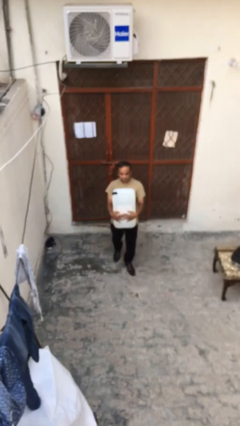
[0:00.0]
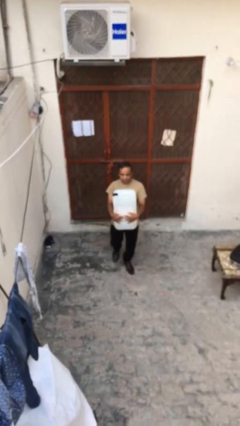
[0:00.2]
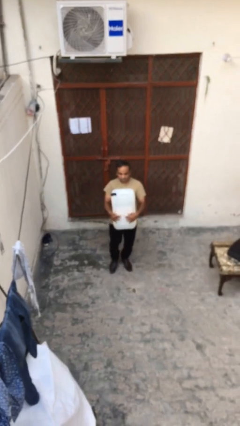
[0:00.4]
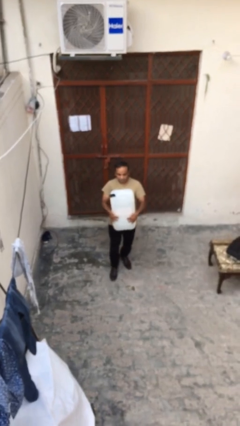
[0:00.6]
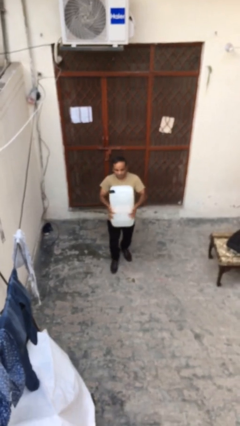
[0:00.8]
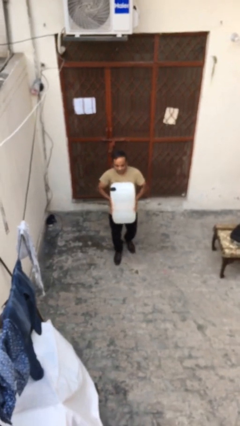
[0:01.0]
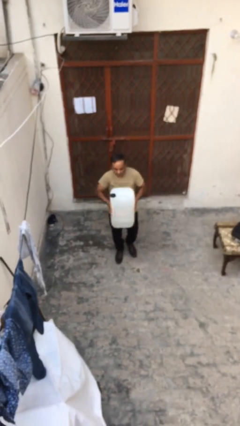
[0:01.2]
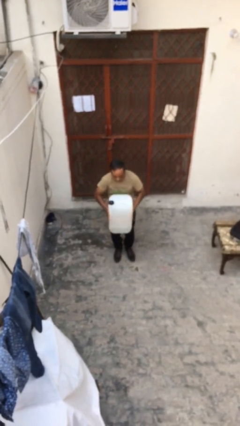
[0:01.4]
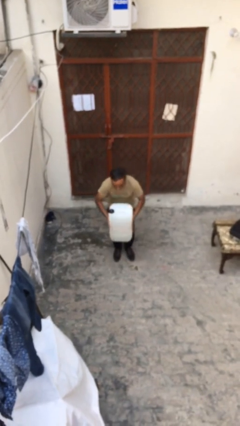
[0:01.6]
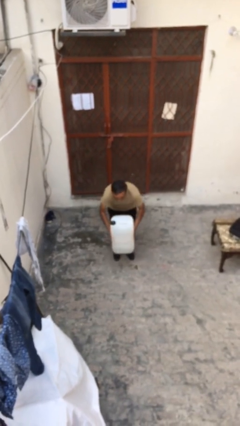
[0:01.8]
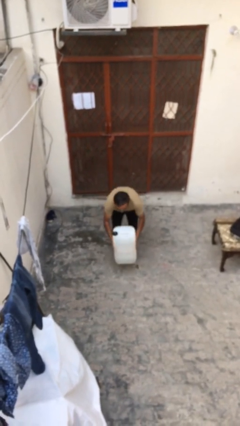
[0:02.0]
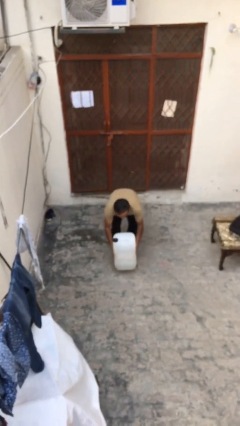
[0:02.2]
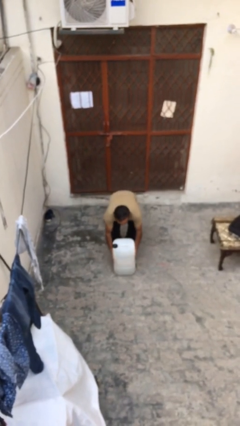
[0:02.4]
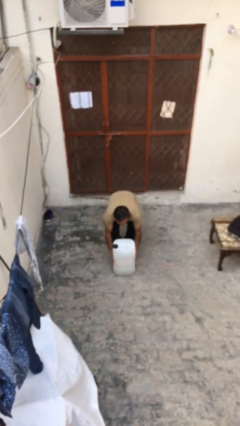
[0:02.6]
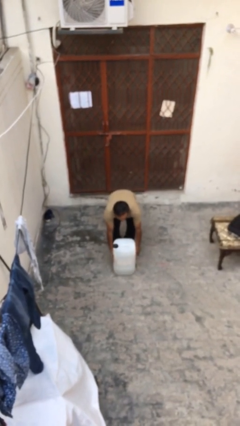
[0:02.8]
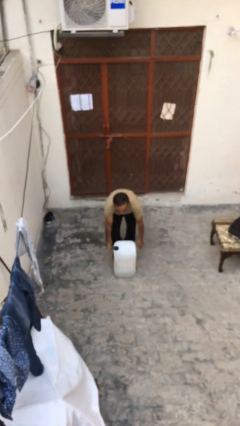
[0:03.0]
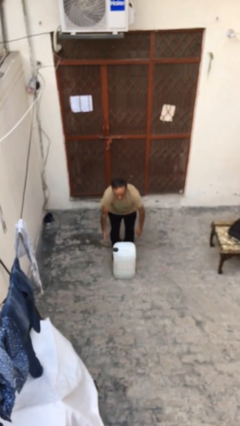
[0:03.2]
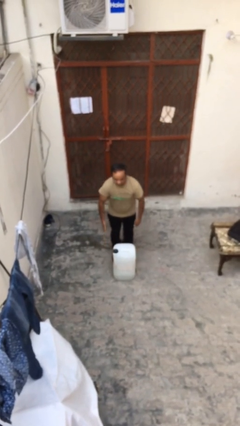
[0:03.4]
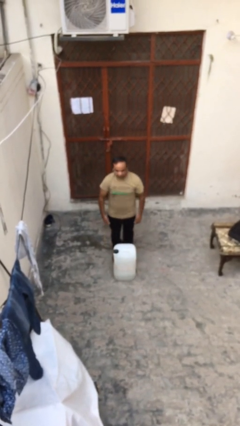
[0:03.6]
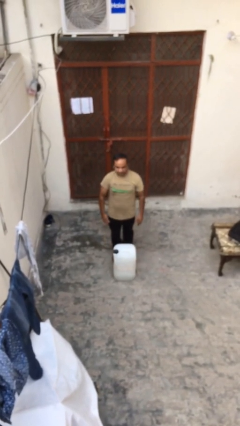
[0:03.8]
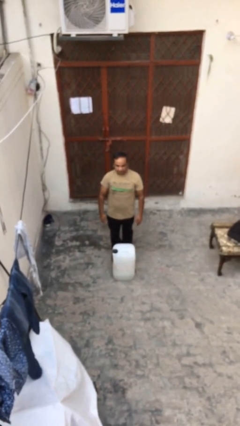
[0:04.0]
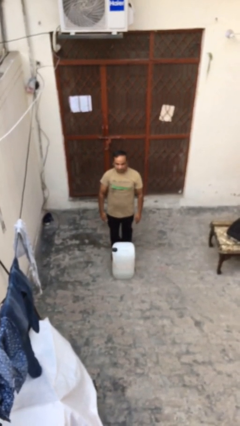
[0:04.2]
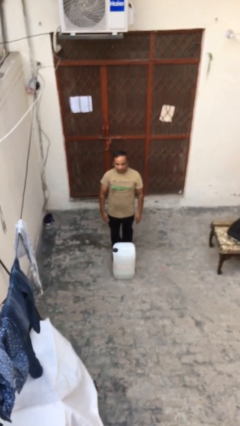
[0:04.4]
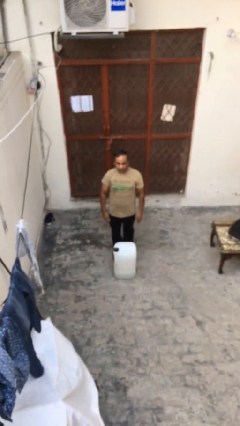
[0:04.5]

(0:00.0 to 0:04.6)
person puts down object on floor

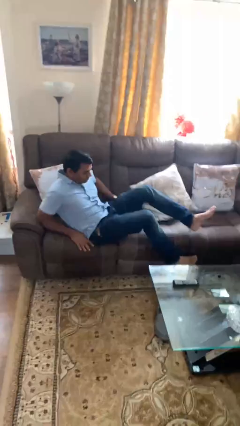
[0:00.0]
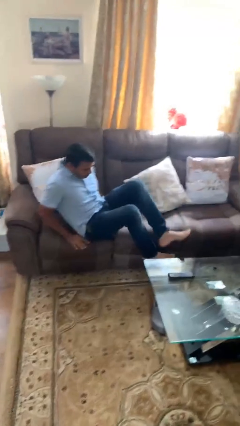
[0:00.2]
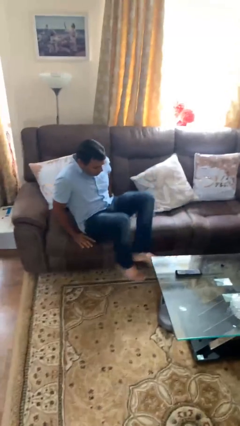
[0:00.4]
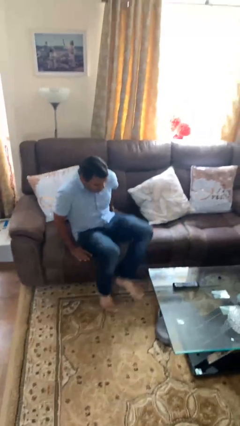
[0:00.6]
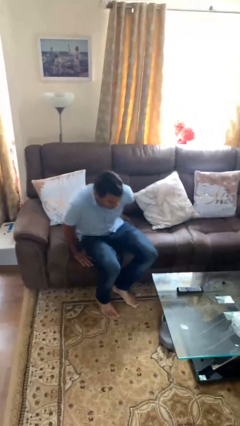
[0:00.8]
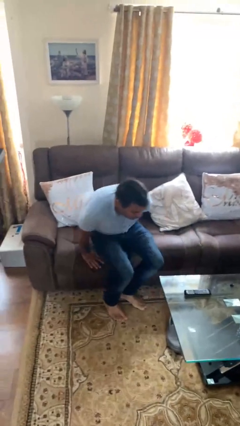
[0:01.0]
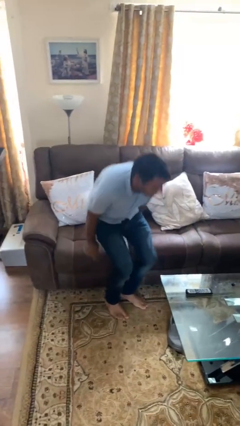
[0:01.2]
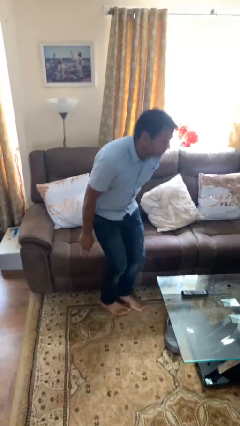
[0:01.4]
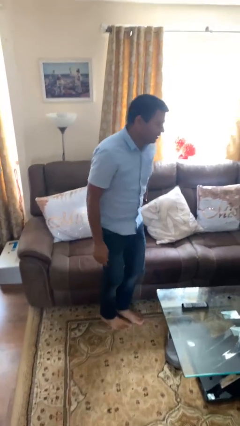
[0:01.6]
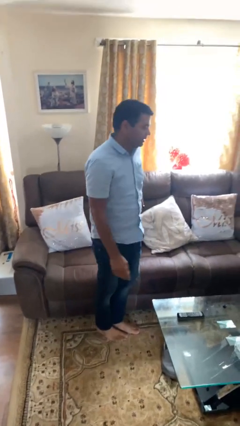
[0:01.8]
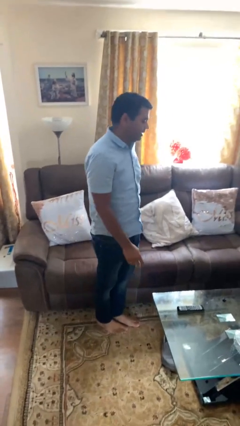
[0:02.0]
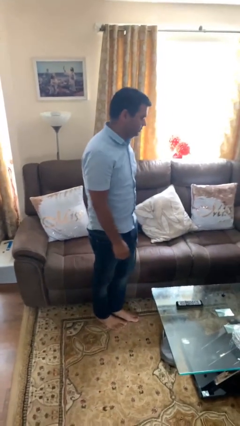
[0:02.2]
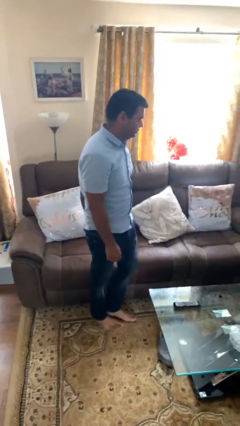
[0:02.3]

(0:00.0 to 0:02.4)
person stands up

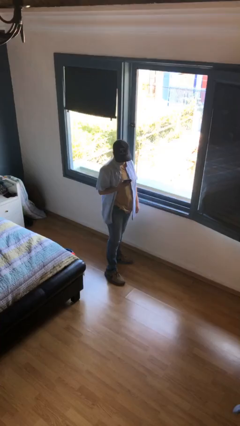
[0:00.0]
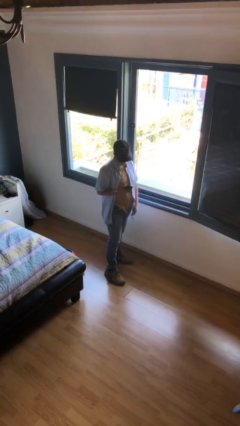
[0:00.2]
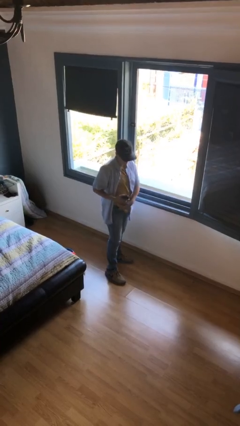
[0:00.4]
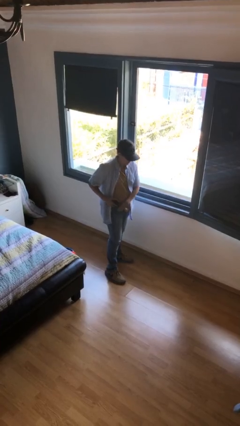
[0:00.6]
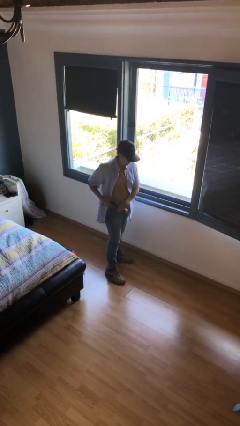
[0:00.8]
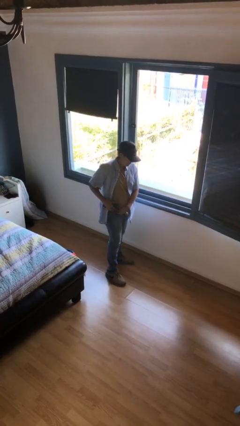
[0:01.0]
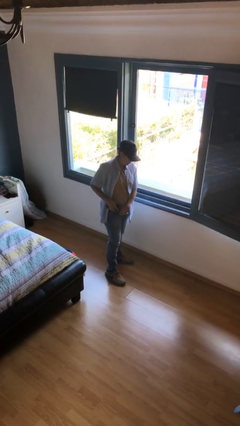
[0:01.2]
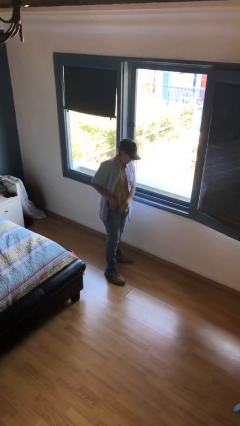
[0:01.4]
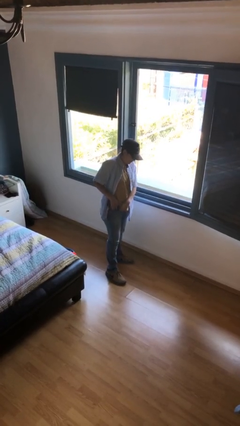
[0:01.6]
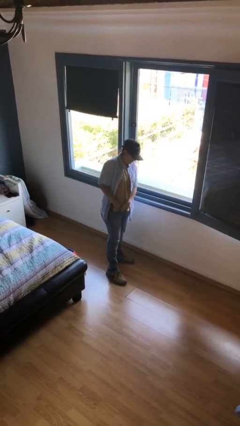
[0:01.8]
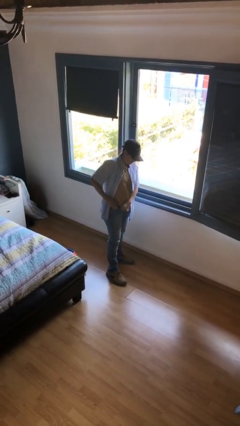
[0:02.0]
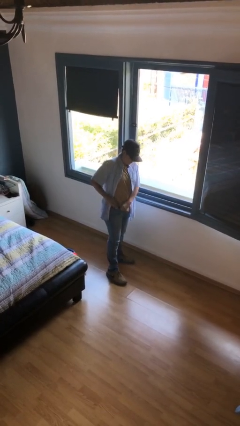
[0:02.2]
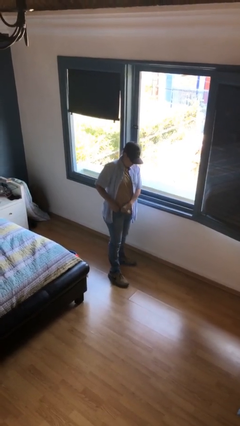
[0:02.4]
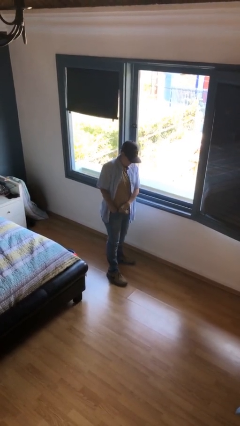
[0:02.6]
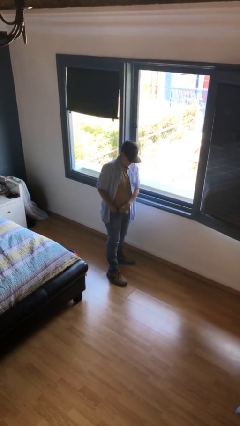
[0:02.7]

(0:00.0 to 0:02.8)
person puts phone into pocket

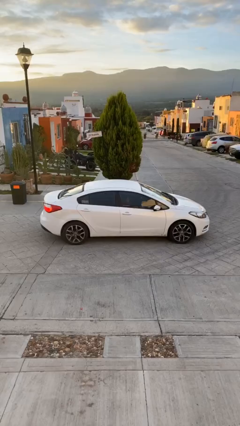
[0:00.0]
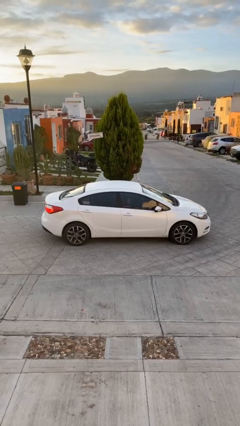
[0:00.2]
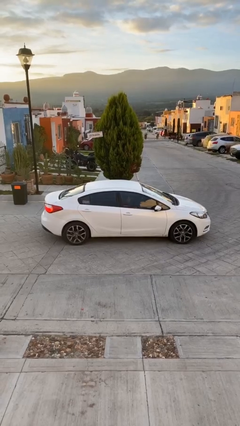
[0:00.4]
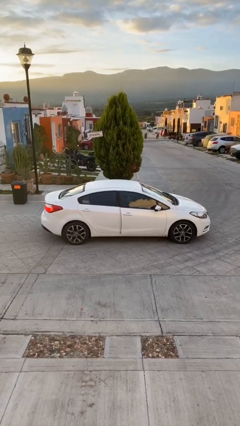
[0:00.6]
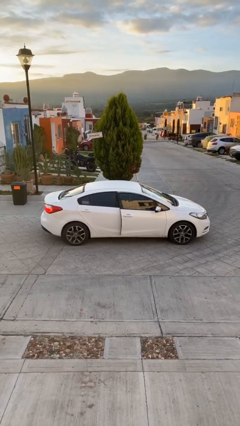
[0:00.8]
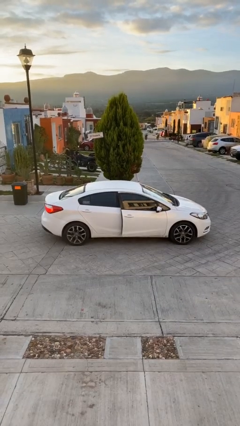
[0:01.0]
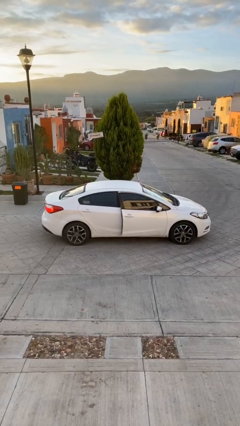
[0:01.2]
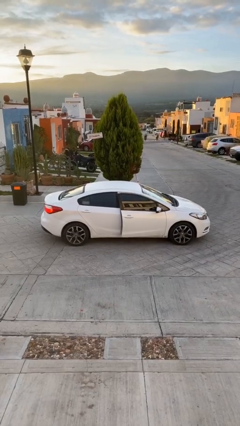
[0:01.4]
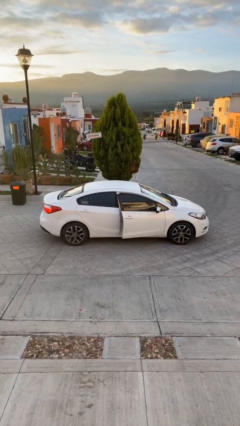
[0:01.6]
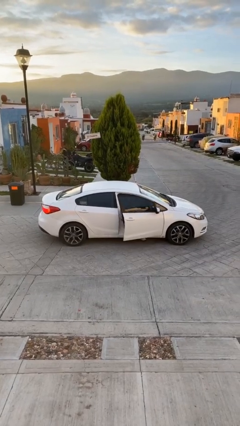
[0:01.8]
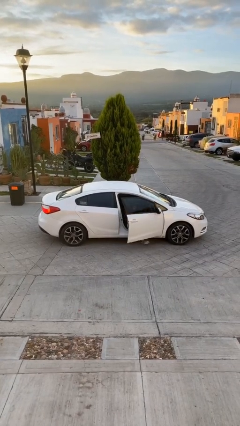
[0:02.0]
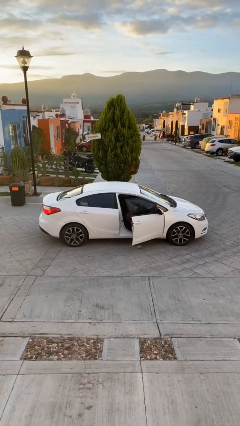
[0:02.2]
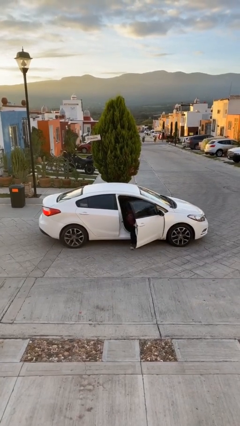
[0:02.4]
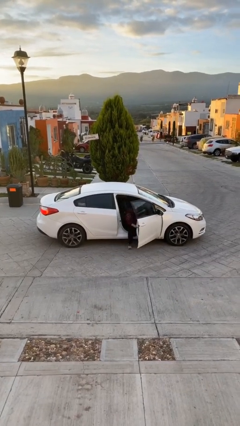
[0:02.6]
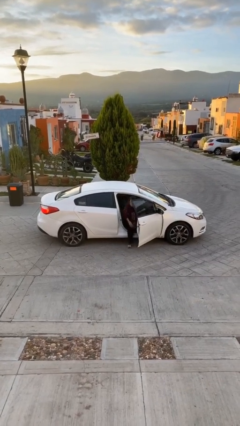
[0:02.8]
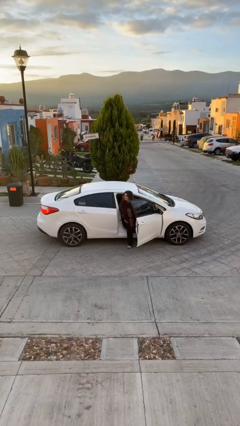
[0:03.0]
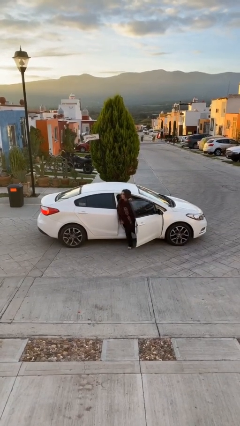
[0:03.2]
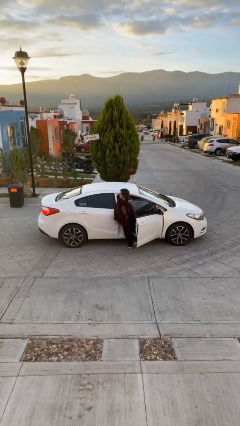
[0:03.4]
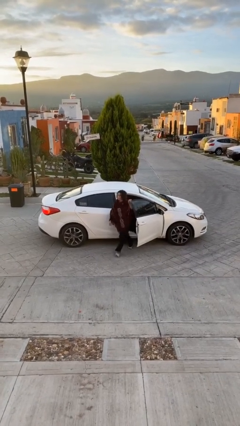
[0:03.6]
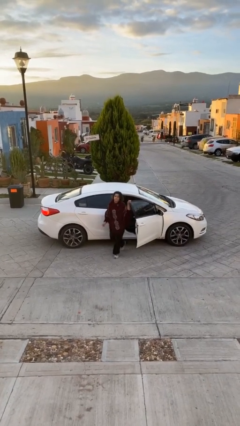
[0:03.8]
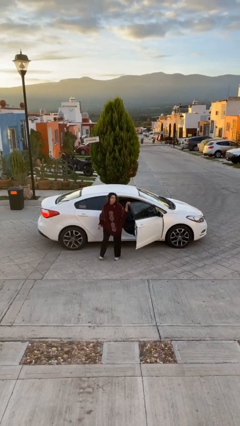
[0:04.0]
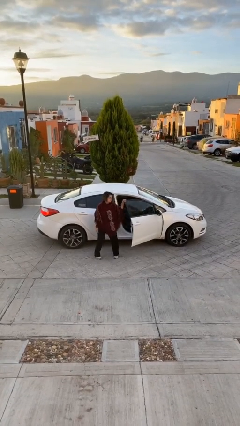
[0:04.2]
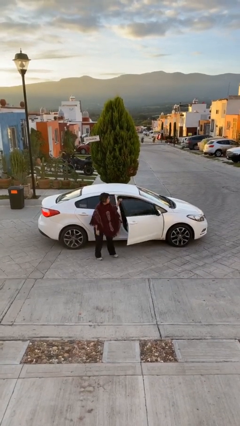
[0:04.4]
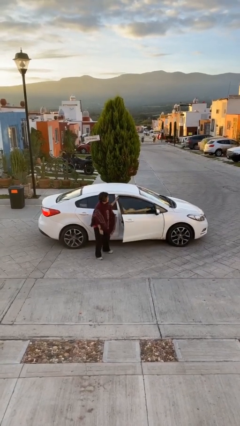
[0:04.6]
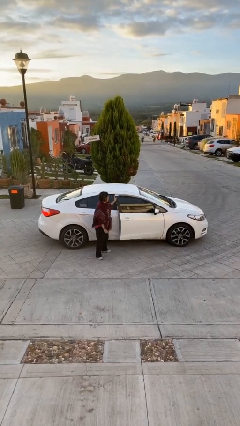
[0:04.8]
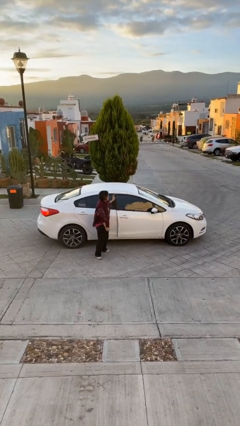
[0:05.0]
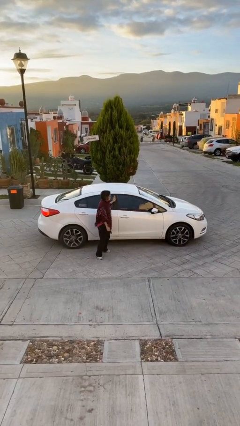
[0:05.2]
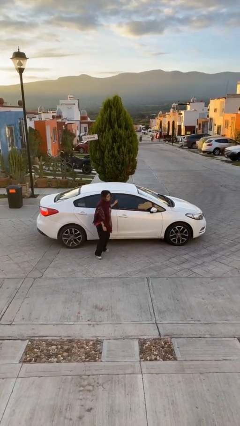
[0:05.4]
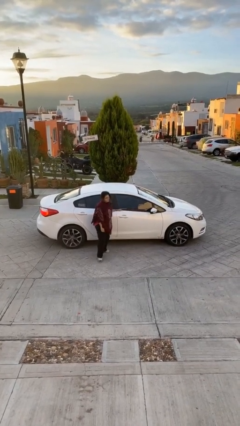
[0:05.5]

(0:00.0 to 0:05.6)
car drops off person

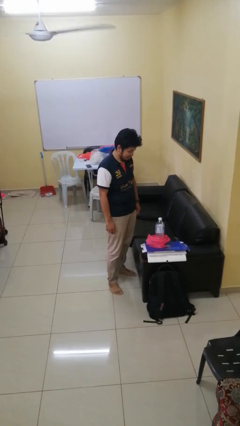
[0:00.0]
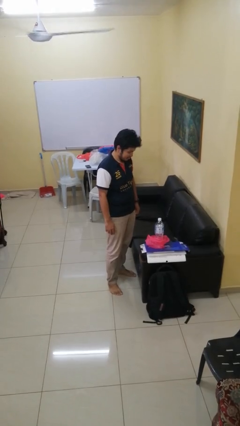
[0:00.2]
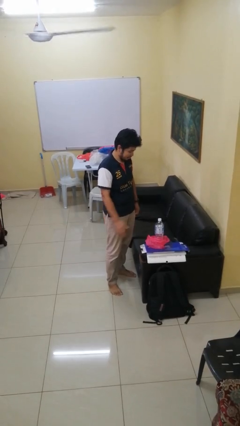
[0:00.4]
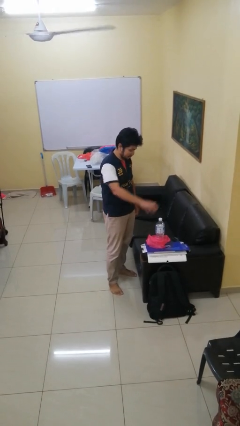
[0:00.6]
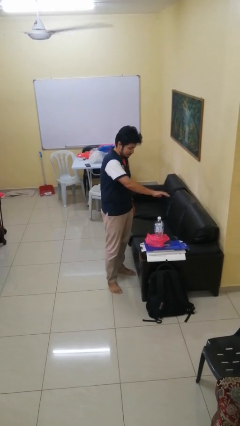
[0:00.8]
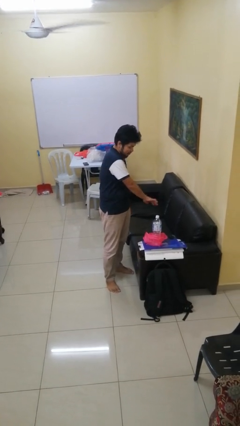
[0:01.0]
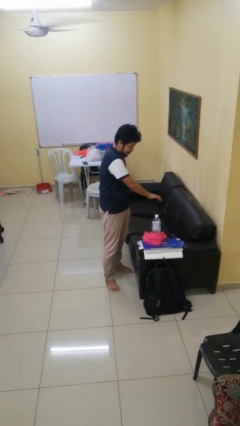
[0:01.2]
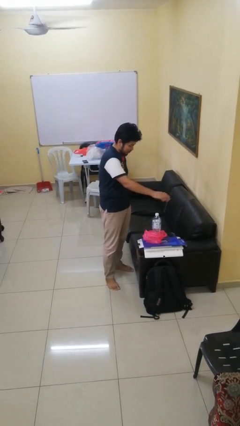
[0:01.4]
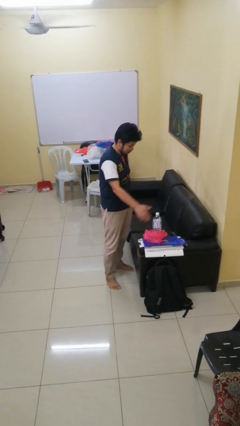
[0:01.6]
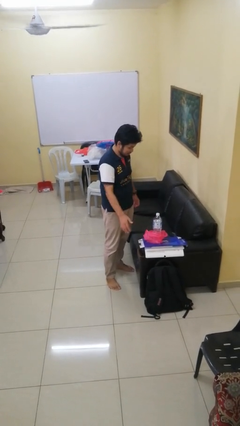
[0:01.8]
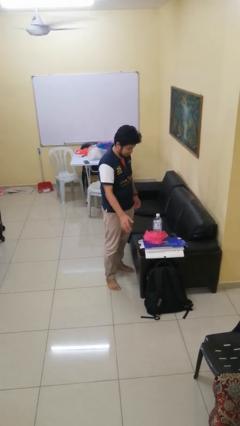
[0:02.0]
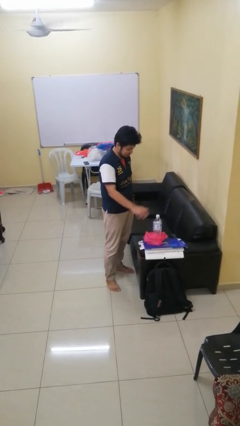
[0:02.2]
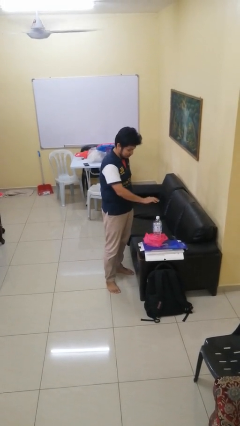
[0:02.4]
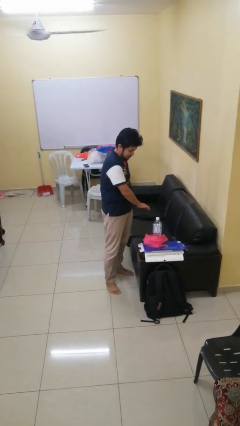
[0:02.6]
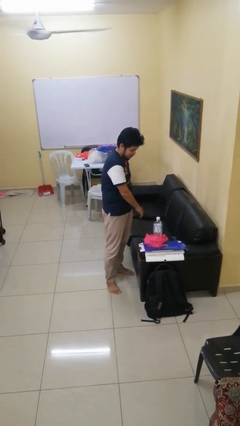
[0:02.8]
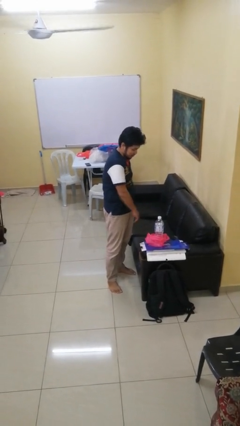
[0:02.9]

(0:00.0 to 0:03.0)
person waves hand over object
